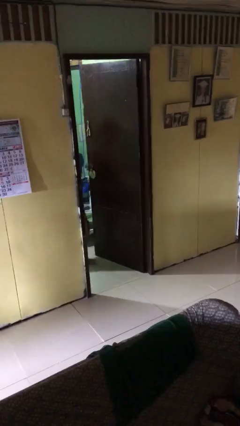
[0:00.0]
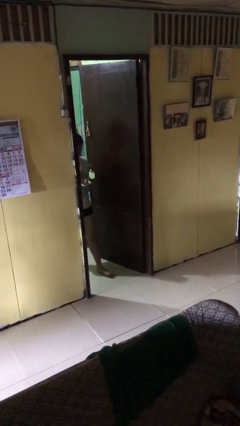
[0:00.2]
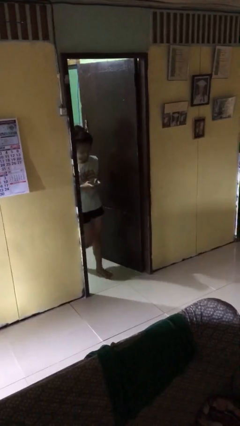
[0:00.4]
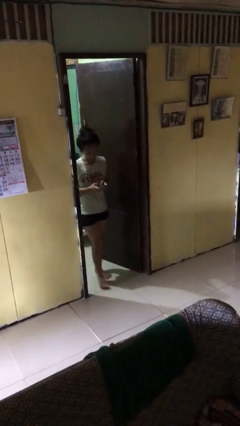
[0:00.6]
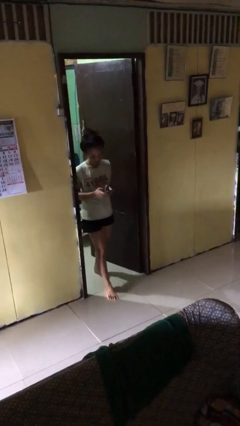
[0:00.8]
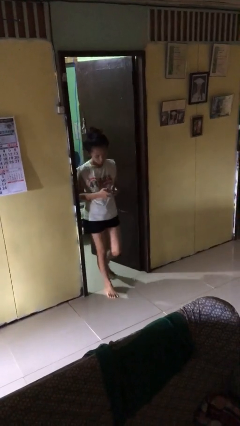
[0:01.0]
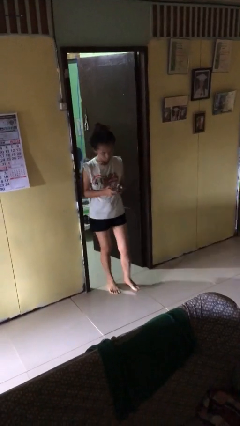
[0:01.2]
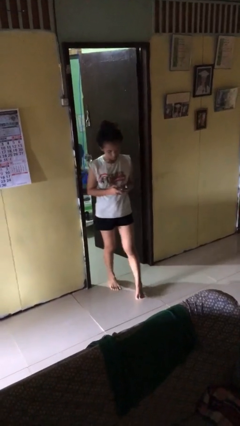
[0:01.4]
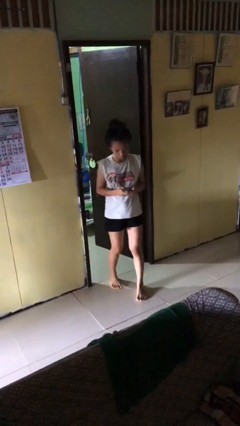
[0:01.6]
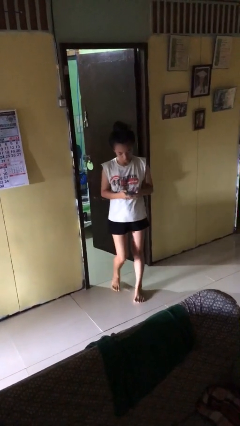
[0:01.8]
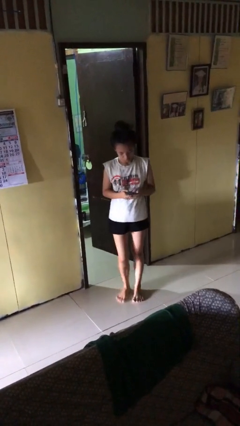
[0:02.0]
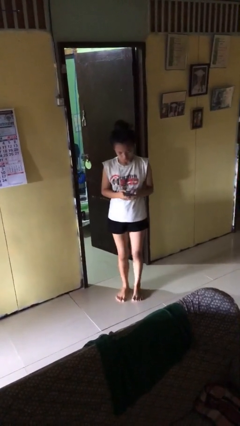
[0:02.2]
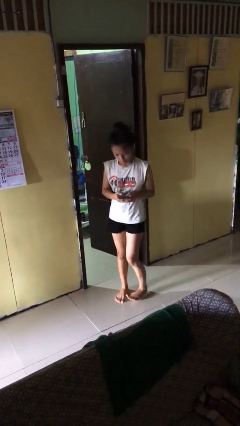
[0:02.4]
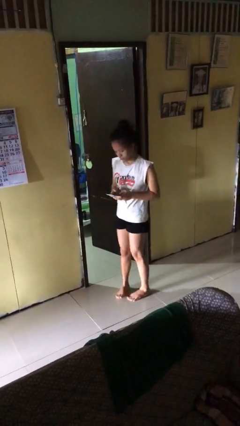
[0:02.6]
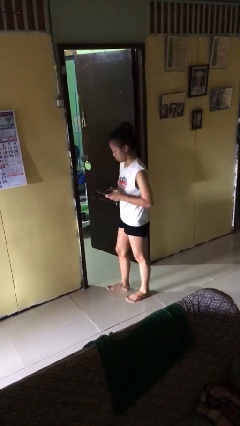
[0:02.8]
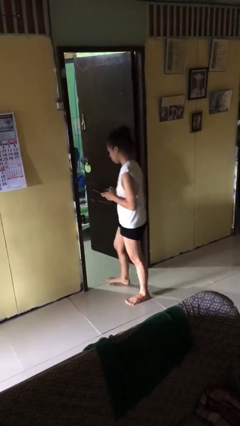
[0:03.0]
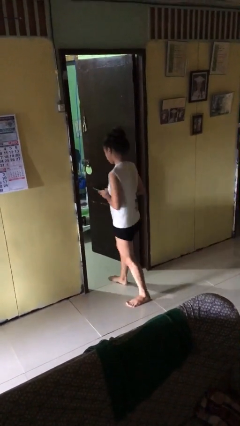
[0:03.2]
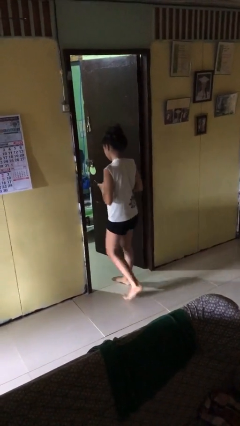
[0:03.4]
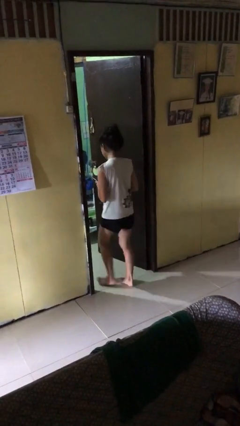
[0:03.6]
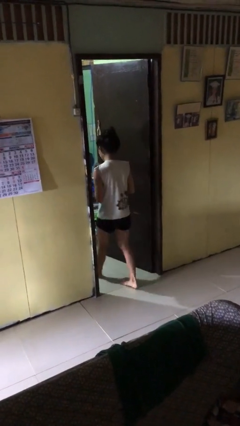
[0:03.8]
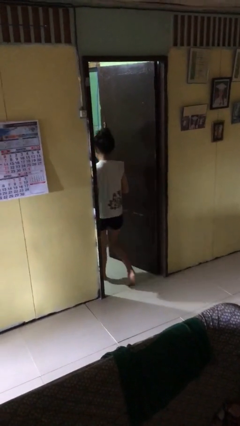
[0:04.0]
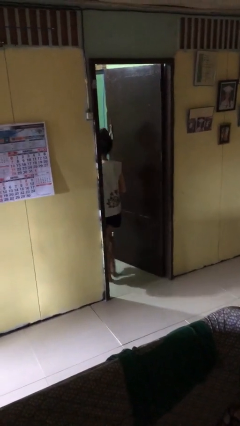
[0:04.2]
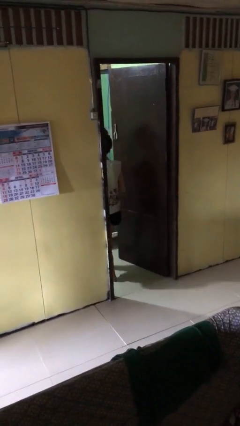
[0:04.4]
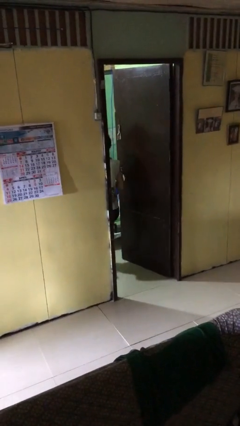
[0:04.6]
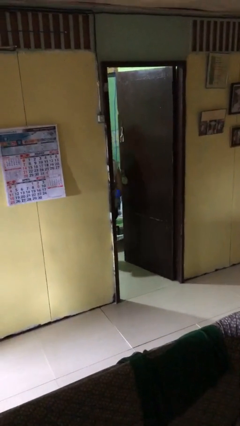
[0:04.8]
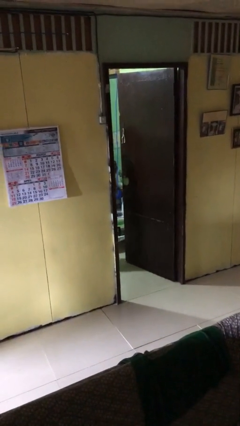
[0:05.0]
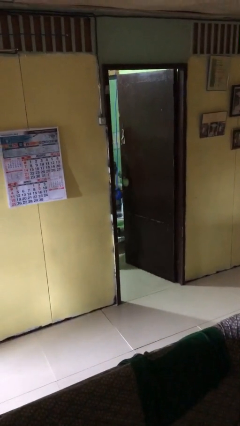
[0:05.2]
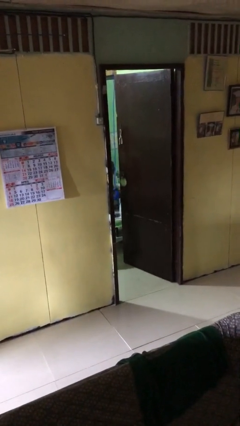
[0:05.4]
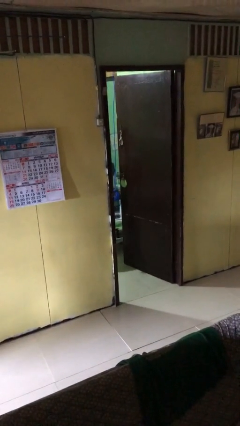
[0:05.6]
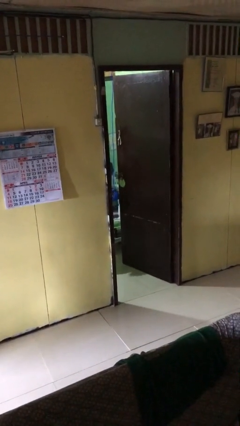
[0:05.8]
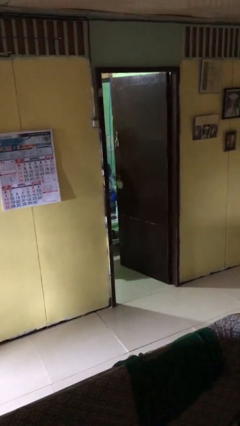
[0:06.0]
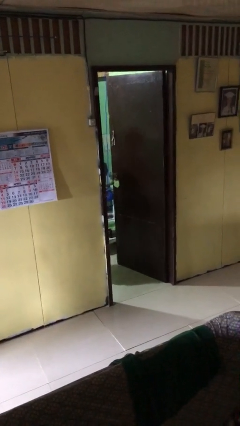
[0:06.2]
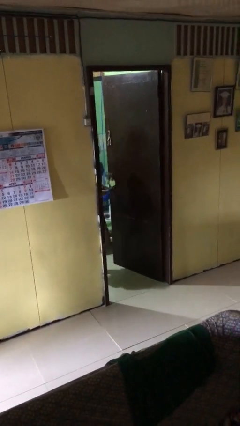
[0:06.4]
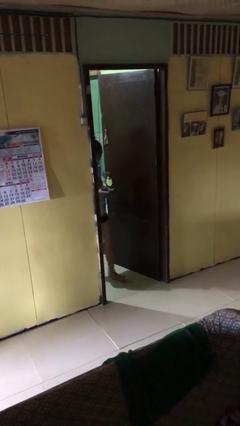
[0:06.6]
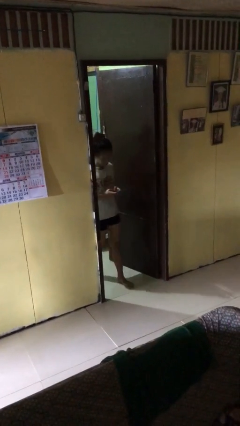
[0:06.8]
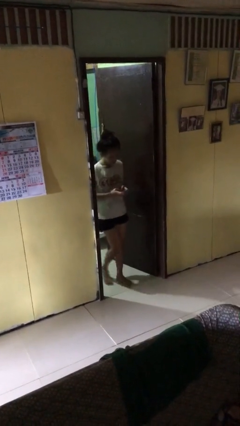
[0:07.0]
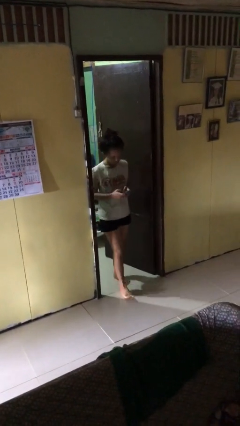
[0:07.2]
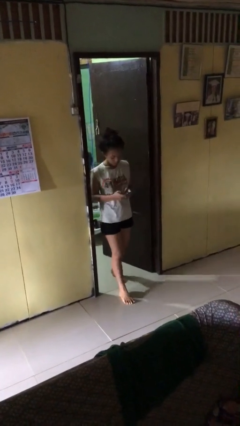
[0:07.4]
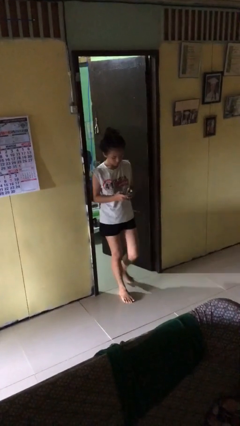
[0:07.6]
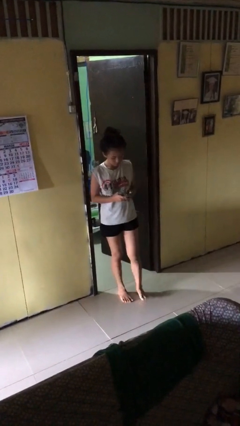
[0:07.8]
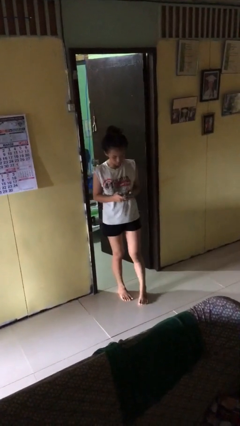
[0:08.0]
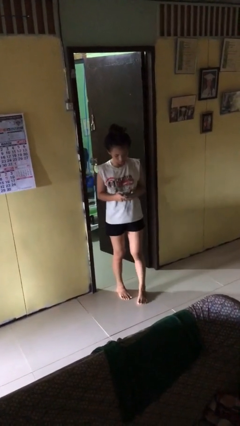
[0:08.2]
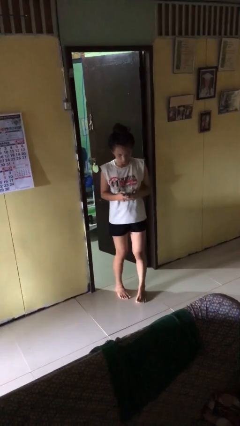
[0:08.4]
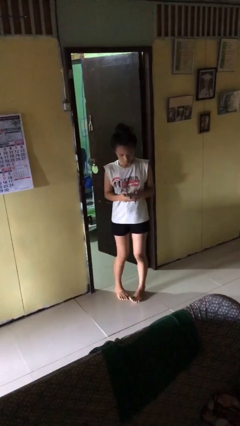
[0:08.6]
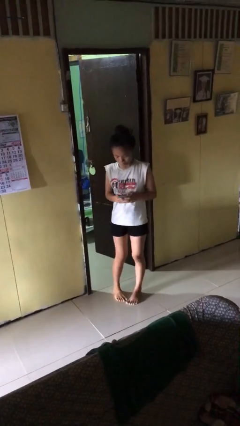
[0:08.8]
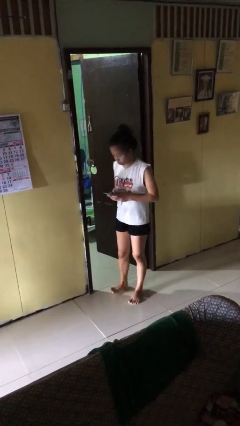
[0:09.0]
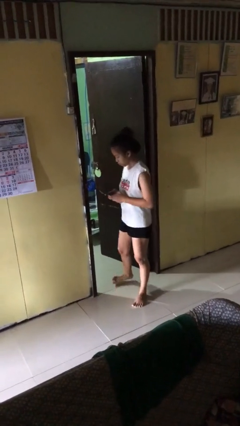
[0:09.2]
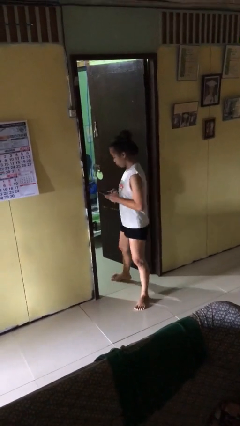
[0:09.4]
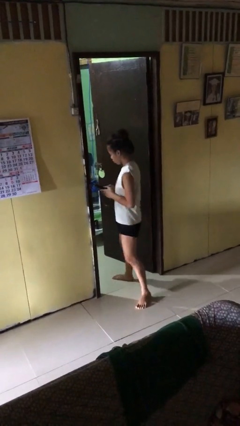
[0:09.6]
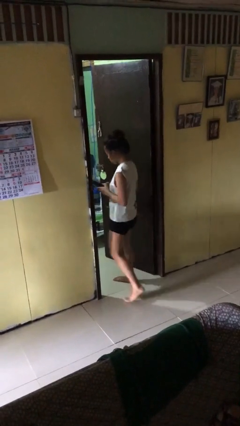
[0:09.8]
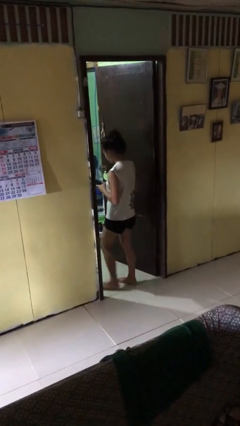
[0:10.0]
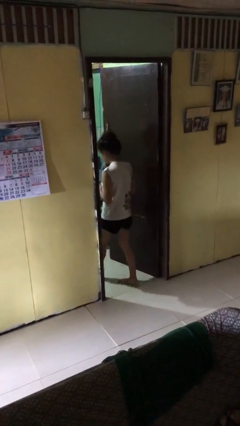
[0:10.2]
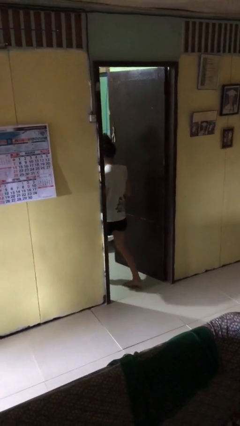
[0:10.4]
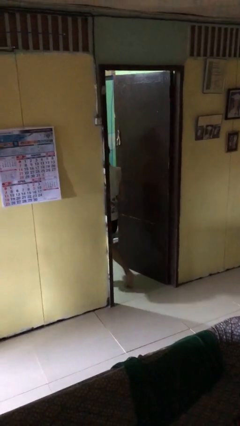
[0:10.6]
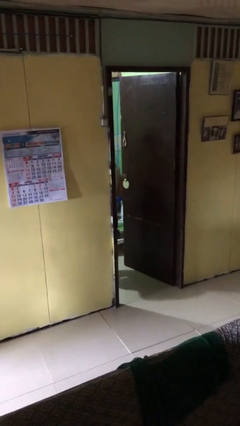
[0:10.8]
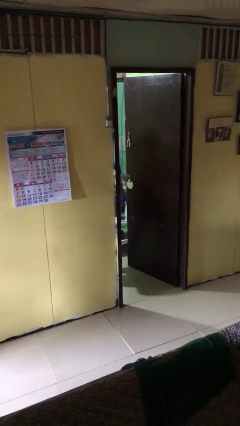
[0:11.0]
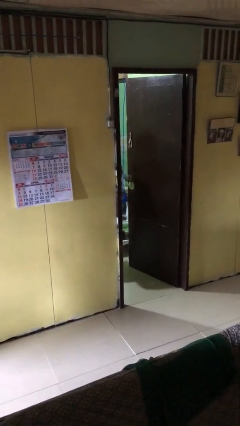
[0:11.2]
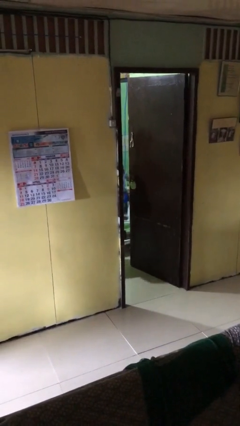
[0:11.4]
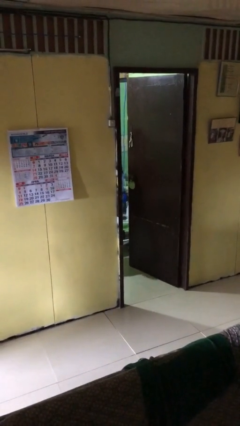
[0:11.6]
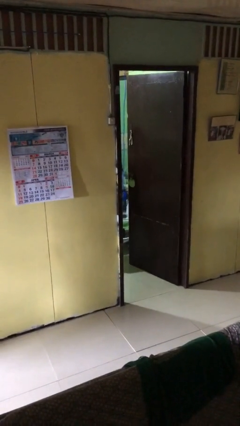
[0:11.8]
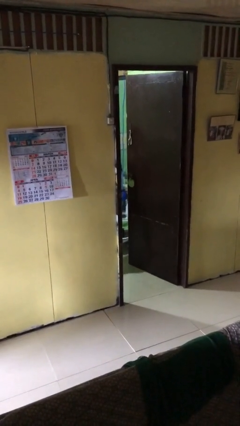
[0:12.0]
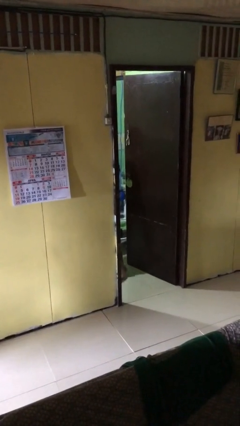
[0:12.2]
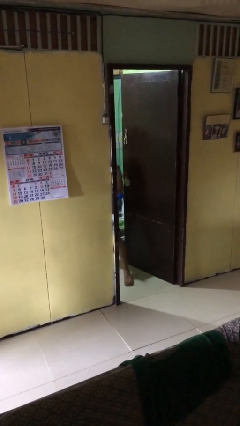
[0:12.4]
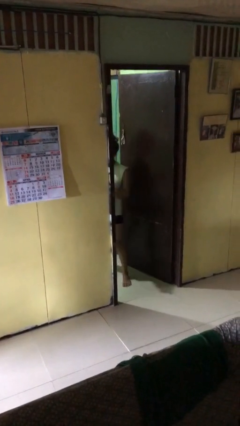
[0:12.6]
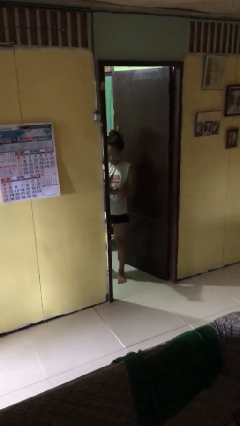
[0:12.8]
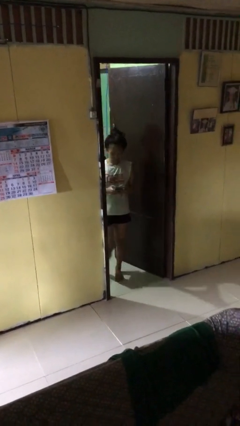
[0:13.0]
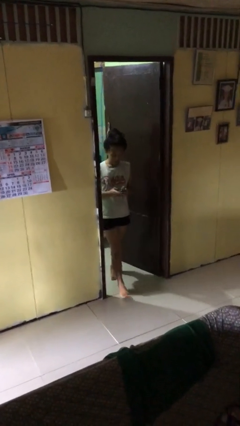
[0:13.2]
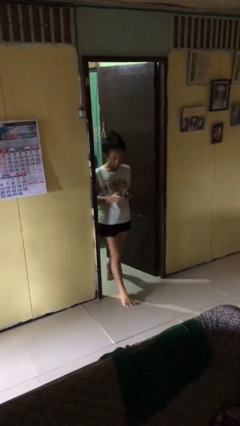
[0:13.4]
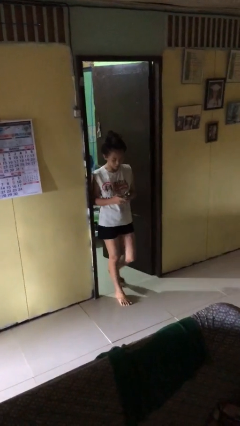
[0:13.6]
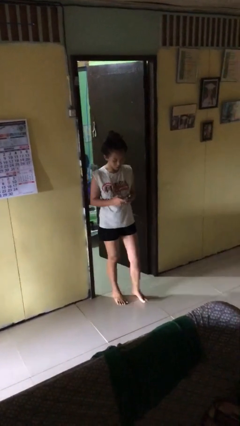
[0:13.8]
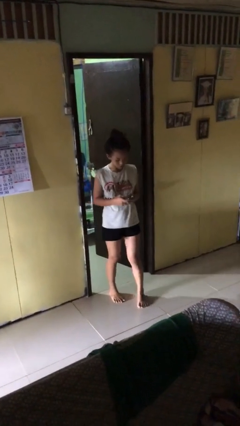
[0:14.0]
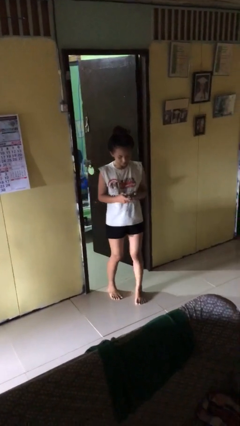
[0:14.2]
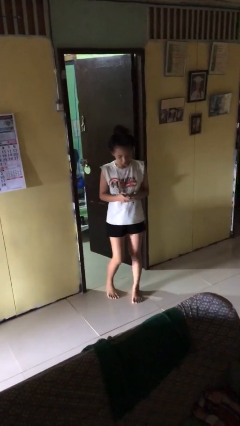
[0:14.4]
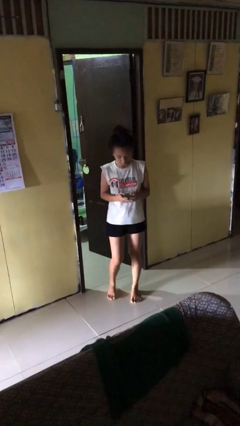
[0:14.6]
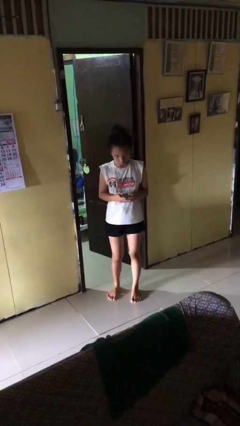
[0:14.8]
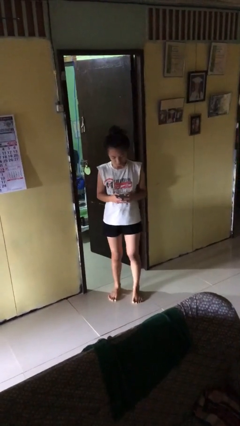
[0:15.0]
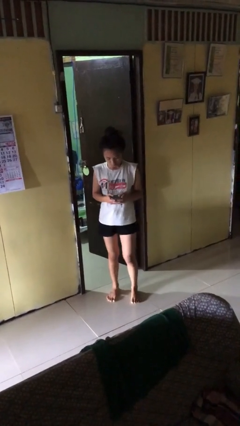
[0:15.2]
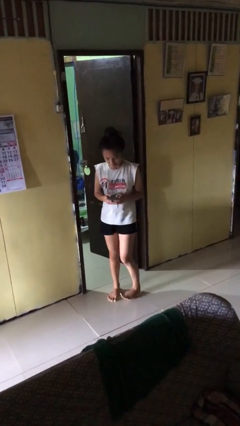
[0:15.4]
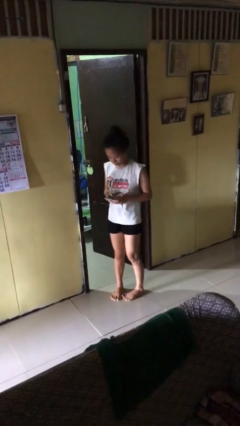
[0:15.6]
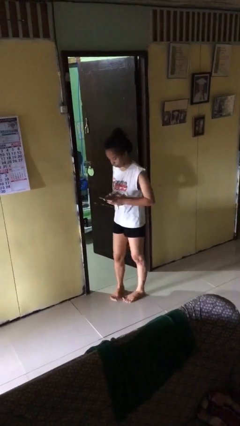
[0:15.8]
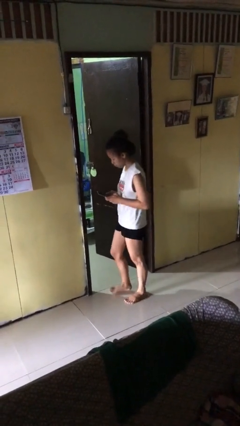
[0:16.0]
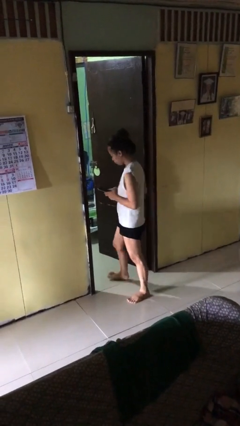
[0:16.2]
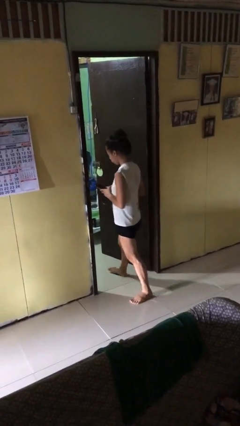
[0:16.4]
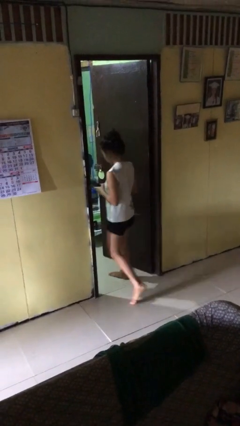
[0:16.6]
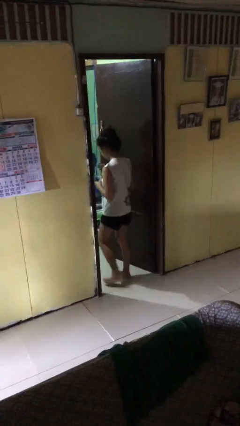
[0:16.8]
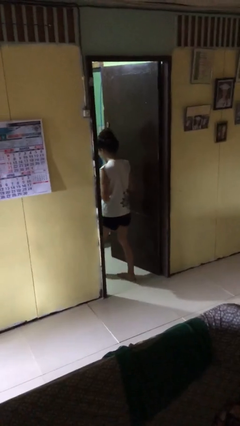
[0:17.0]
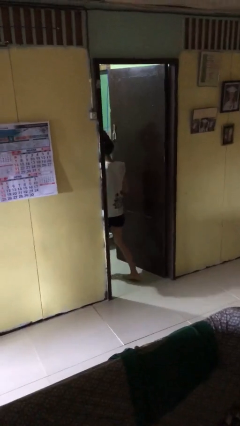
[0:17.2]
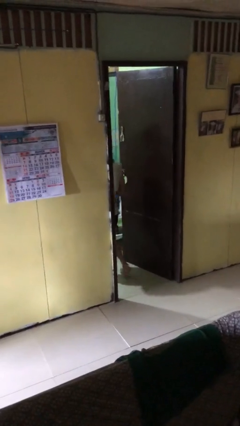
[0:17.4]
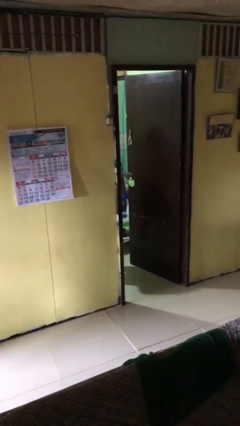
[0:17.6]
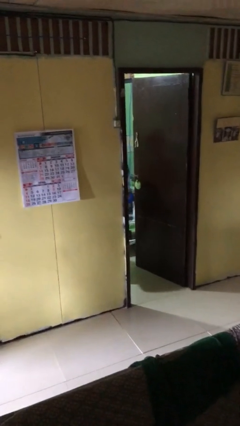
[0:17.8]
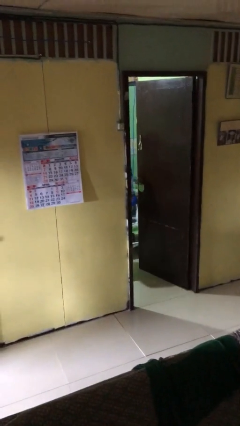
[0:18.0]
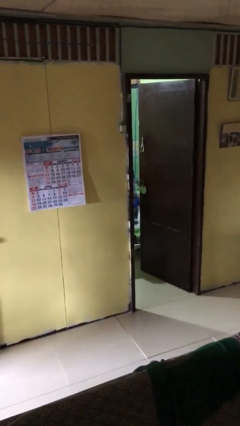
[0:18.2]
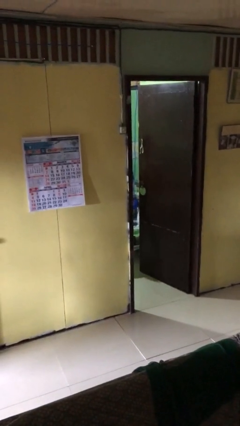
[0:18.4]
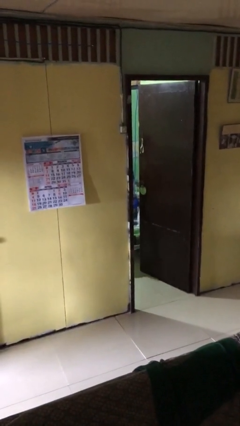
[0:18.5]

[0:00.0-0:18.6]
person texts on phone
